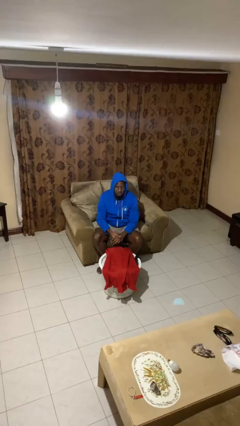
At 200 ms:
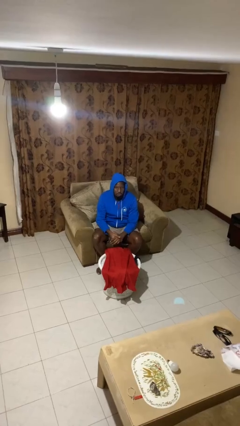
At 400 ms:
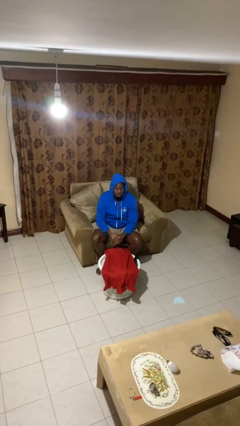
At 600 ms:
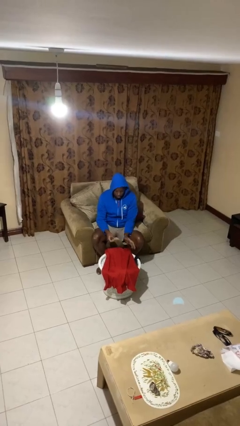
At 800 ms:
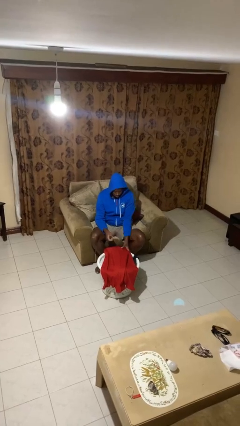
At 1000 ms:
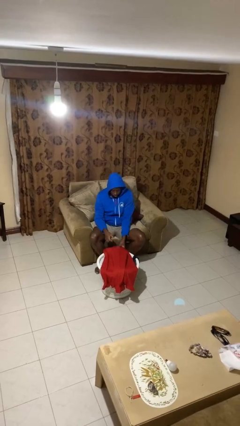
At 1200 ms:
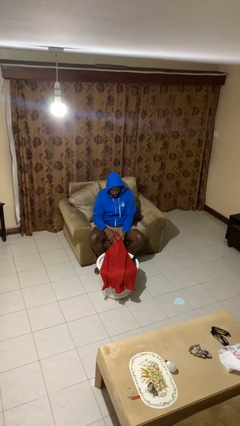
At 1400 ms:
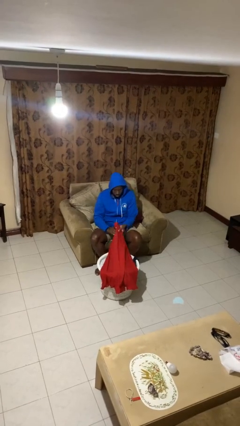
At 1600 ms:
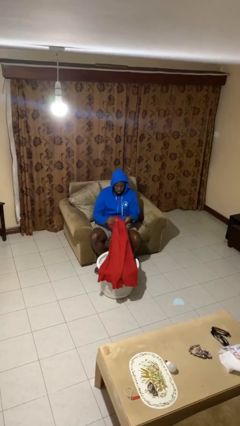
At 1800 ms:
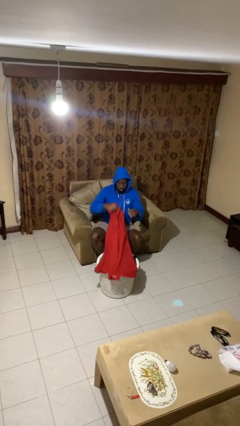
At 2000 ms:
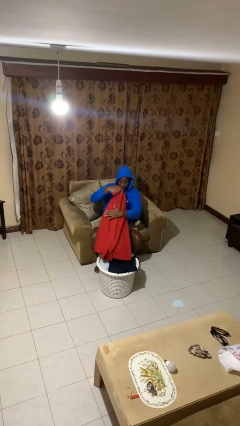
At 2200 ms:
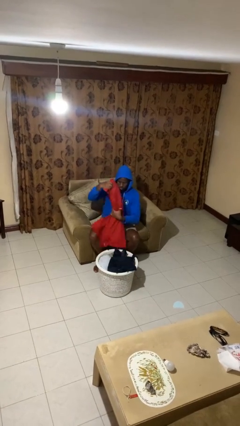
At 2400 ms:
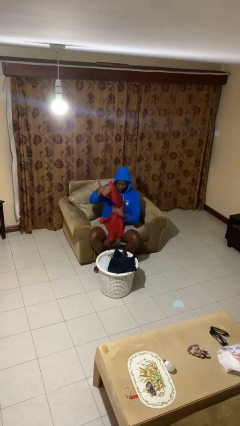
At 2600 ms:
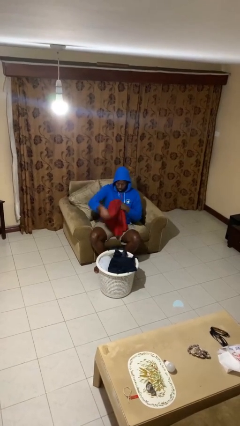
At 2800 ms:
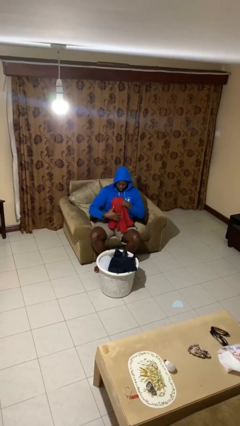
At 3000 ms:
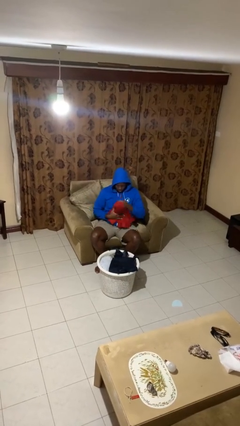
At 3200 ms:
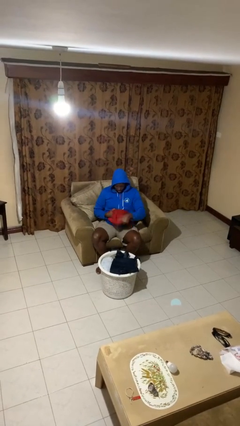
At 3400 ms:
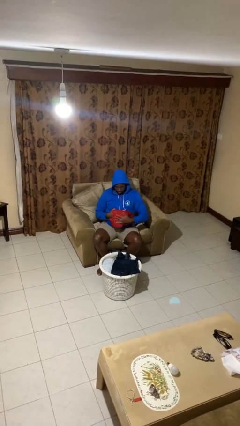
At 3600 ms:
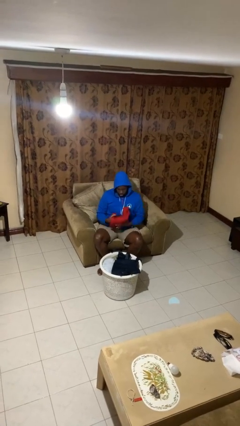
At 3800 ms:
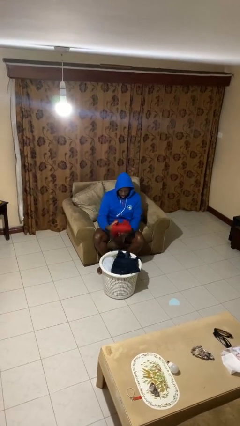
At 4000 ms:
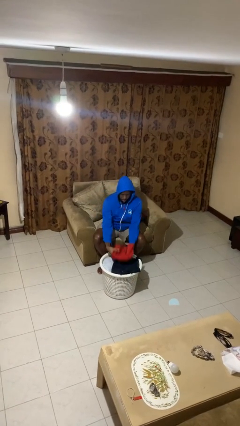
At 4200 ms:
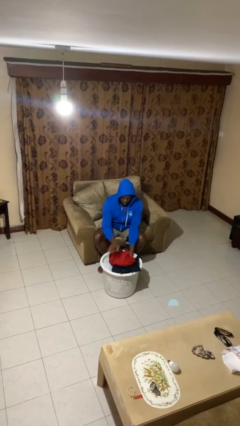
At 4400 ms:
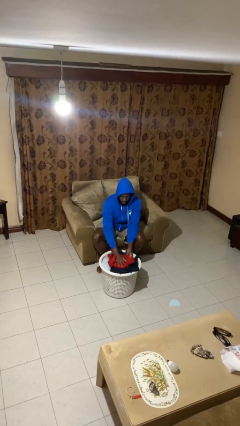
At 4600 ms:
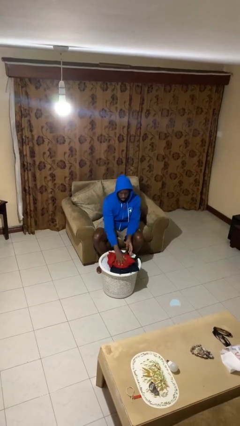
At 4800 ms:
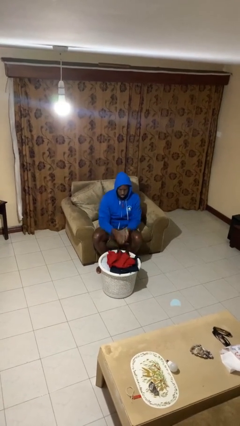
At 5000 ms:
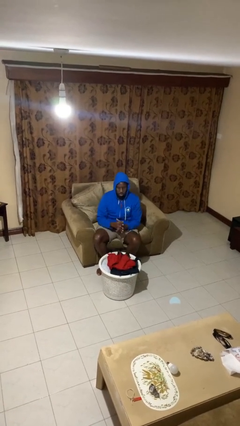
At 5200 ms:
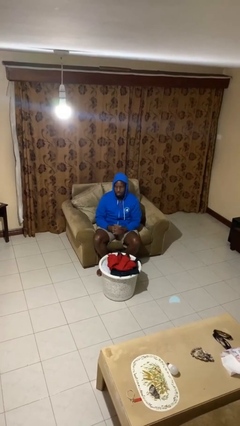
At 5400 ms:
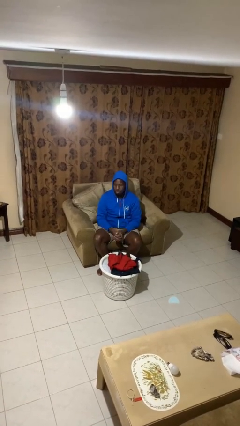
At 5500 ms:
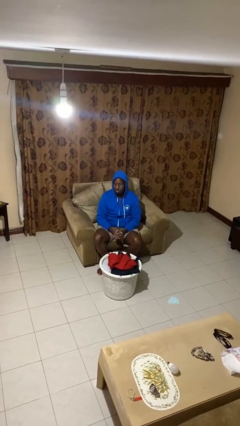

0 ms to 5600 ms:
person folds shirt

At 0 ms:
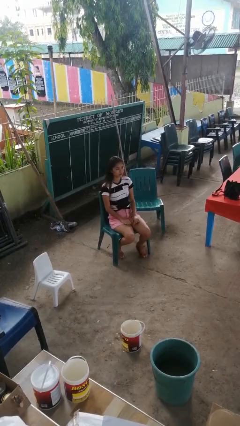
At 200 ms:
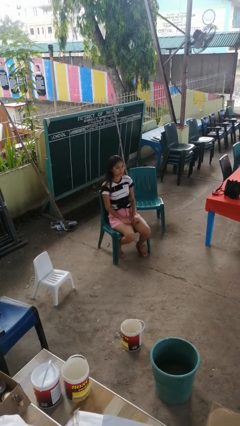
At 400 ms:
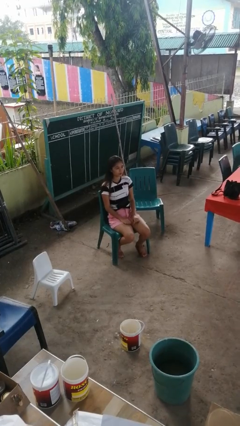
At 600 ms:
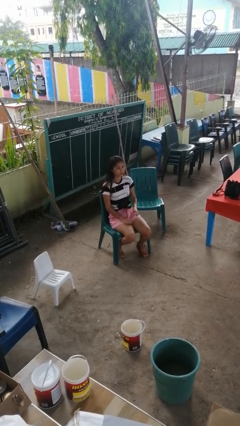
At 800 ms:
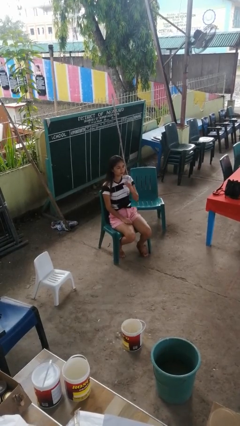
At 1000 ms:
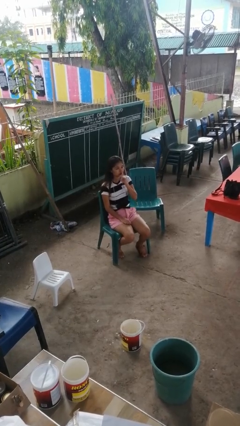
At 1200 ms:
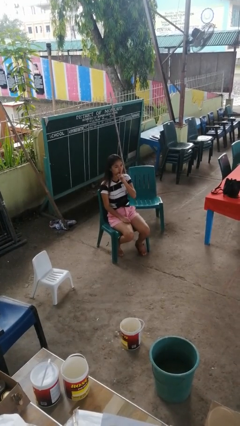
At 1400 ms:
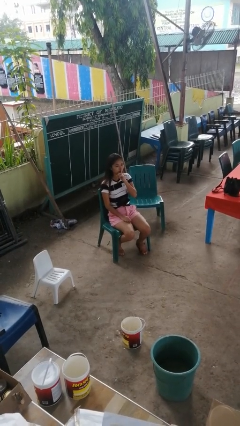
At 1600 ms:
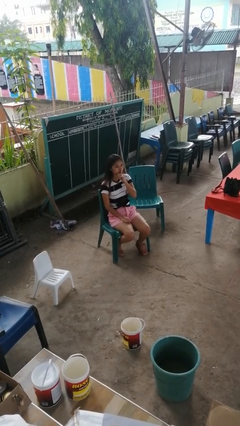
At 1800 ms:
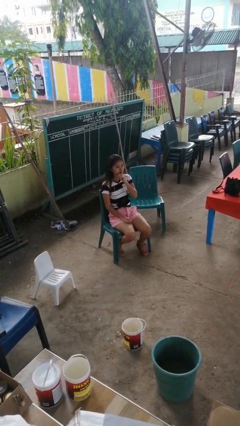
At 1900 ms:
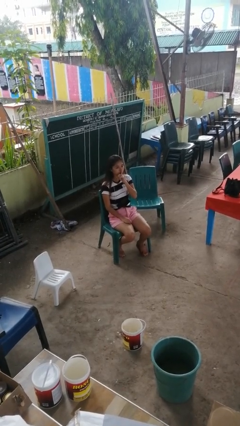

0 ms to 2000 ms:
person gestures be quiet

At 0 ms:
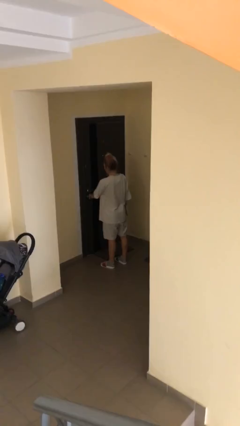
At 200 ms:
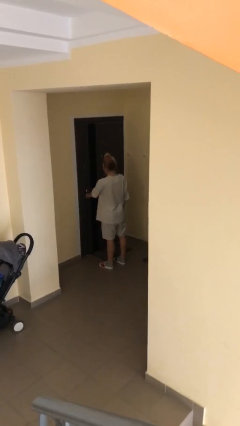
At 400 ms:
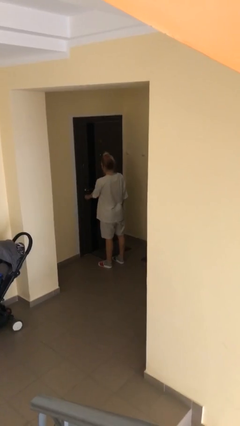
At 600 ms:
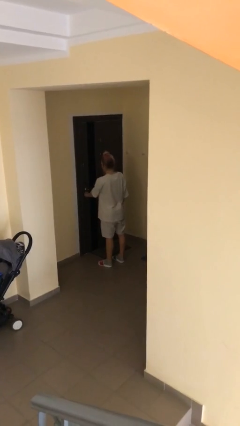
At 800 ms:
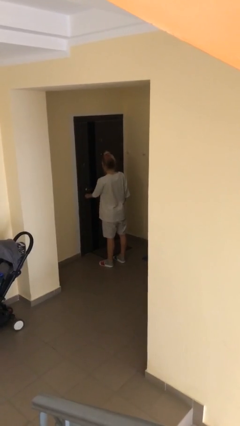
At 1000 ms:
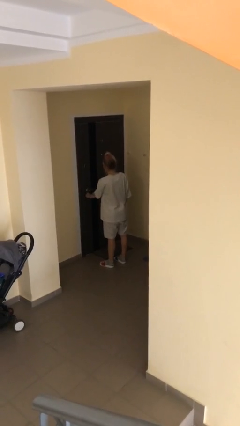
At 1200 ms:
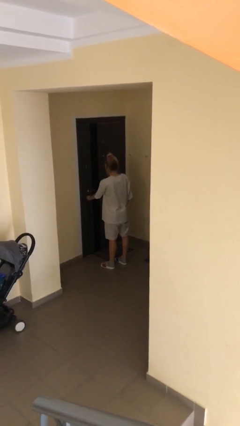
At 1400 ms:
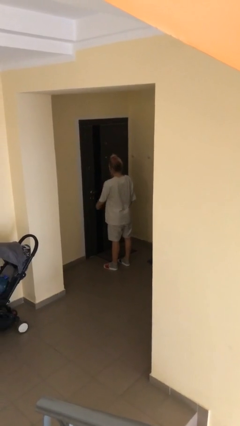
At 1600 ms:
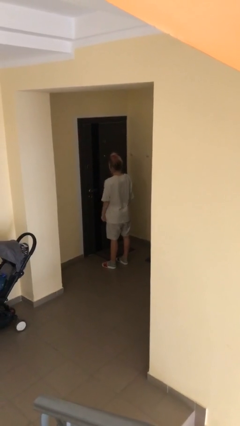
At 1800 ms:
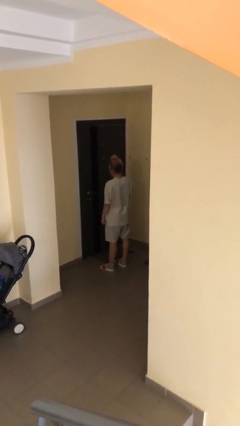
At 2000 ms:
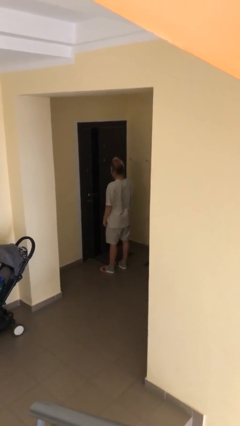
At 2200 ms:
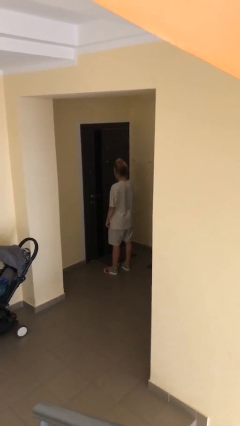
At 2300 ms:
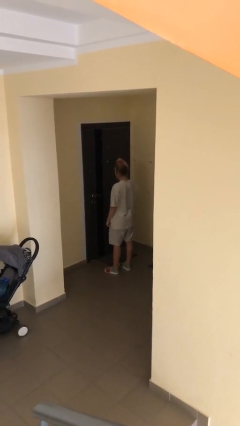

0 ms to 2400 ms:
person locks door with keys

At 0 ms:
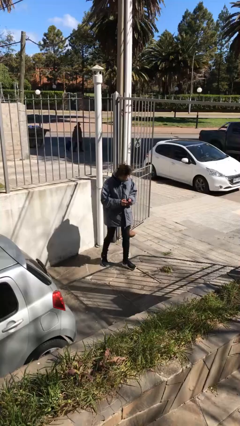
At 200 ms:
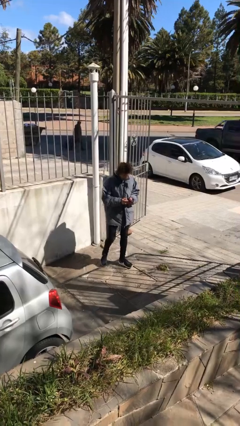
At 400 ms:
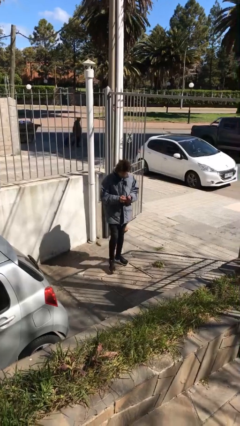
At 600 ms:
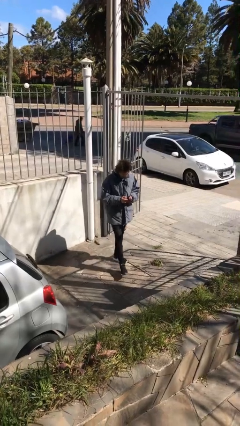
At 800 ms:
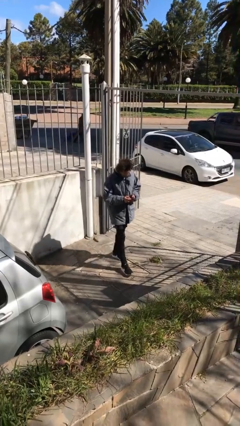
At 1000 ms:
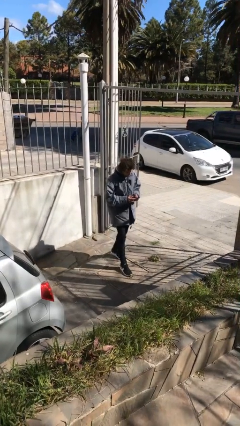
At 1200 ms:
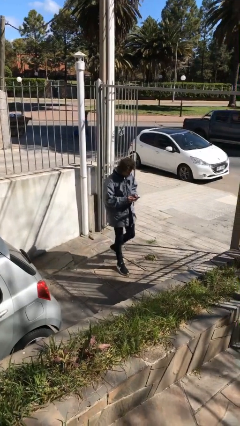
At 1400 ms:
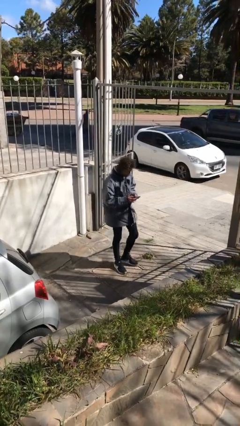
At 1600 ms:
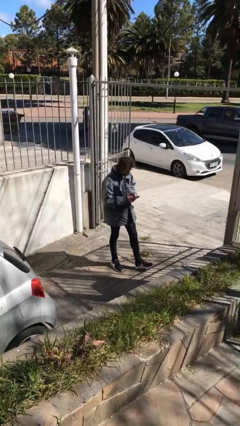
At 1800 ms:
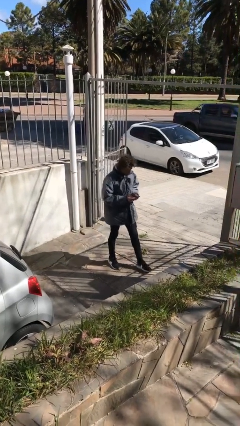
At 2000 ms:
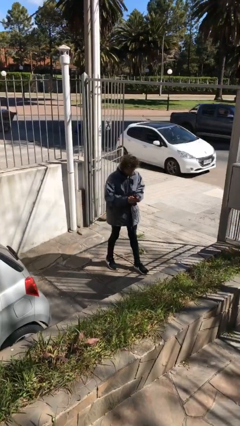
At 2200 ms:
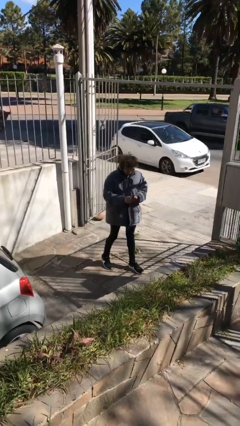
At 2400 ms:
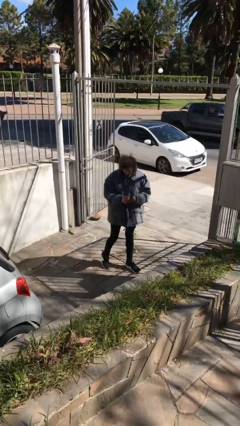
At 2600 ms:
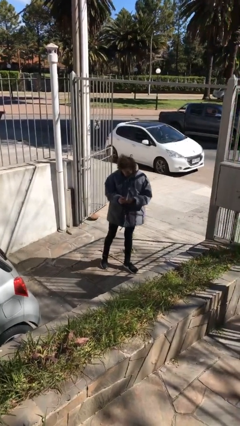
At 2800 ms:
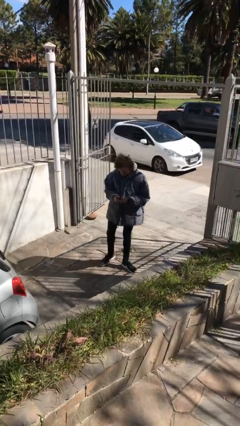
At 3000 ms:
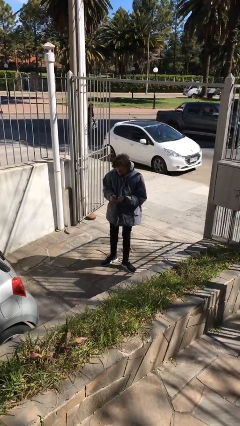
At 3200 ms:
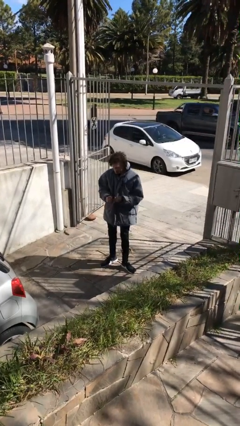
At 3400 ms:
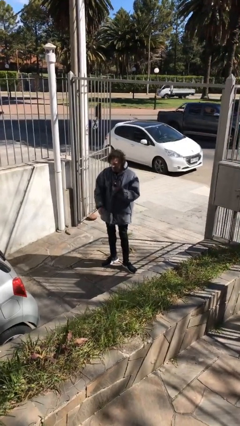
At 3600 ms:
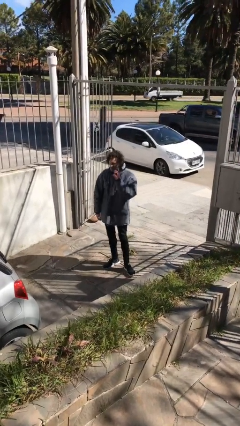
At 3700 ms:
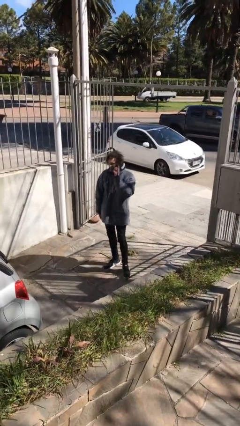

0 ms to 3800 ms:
person texts on phone

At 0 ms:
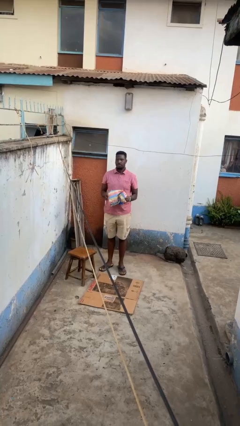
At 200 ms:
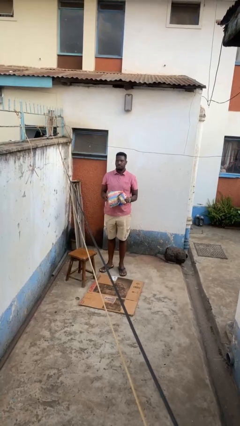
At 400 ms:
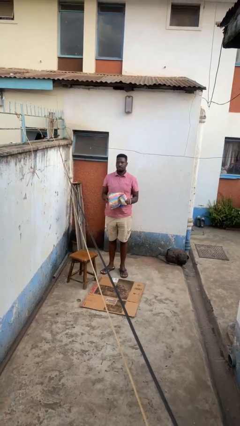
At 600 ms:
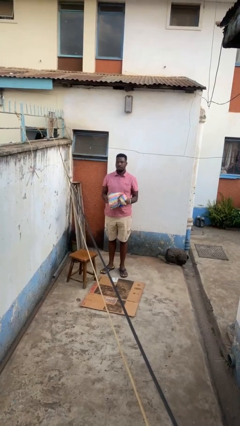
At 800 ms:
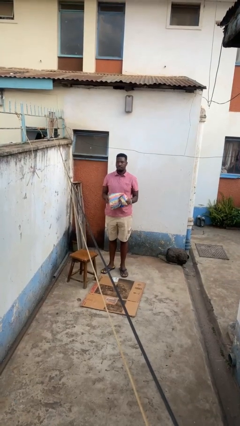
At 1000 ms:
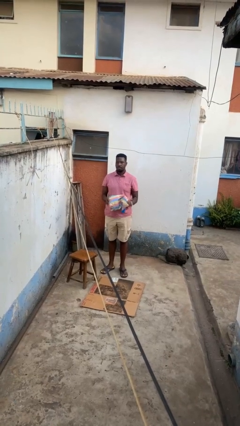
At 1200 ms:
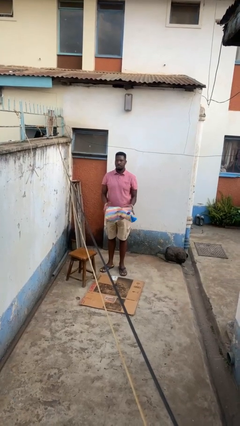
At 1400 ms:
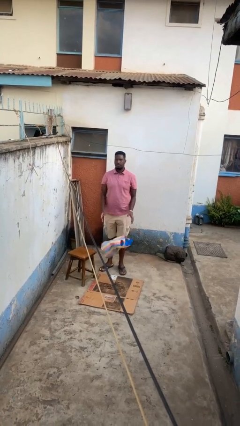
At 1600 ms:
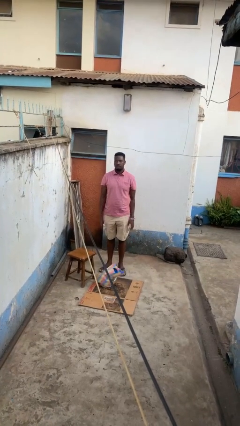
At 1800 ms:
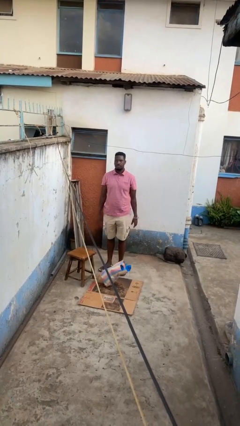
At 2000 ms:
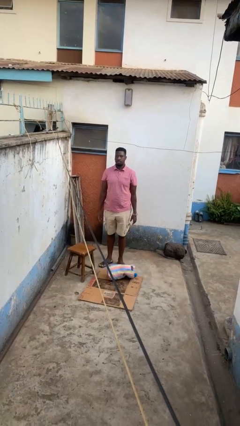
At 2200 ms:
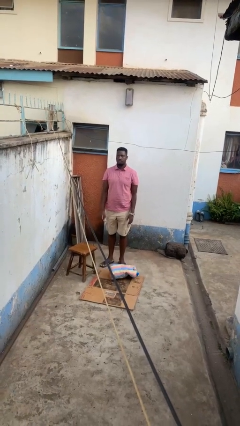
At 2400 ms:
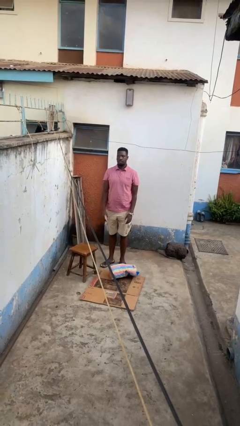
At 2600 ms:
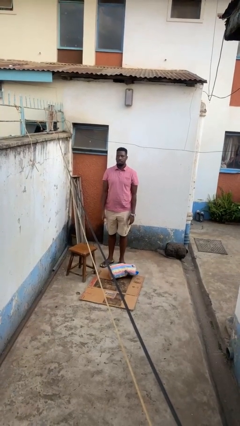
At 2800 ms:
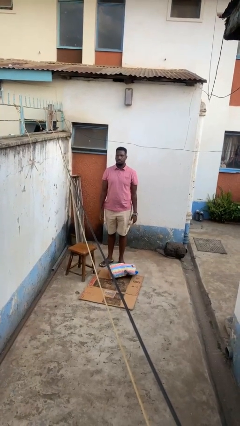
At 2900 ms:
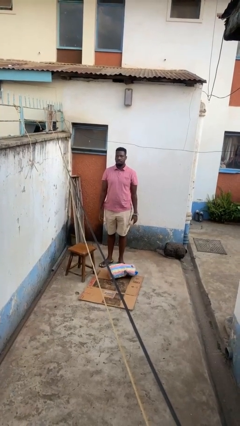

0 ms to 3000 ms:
person drops object

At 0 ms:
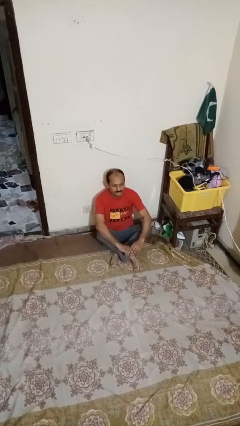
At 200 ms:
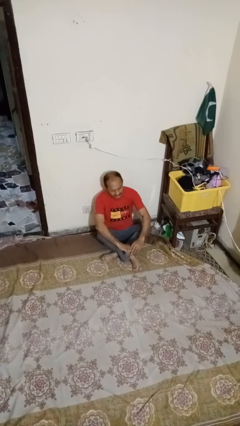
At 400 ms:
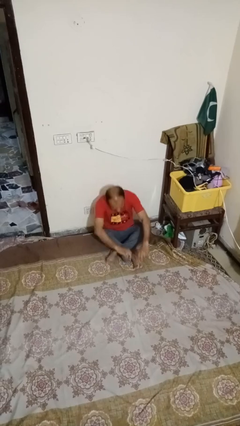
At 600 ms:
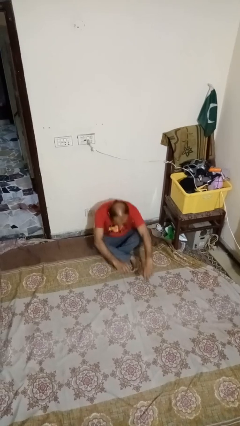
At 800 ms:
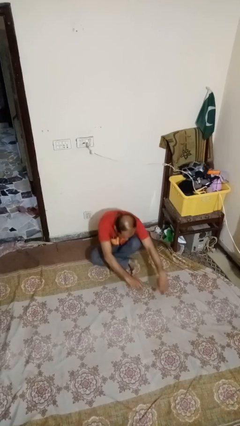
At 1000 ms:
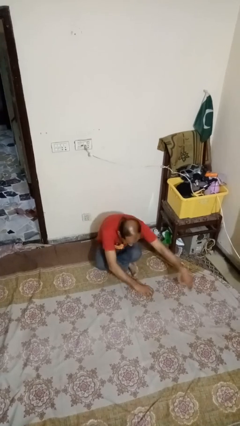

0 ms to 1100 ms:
person stands up from floor
